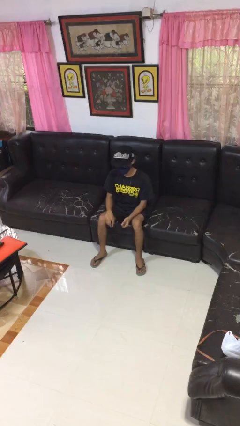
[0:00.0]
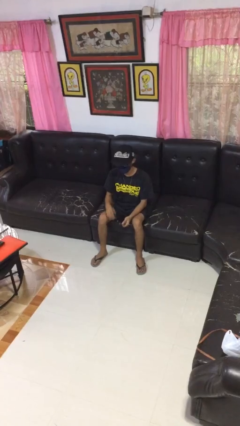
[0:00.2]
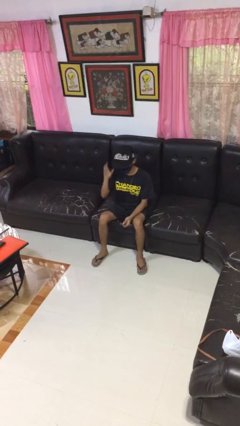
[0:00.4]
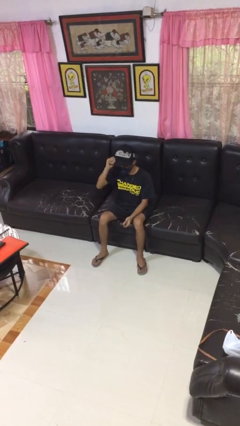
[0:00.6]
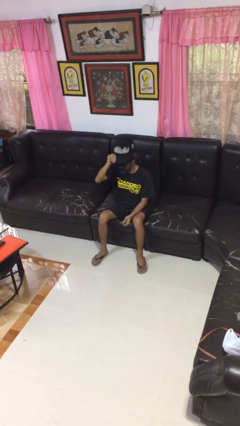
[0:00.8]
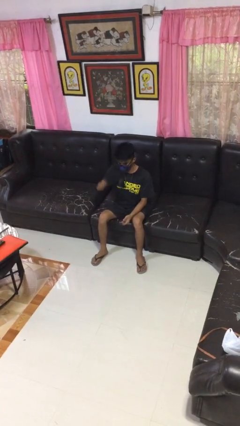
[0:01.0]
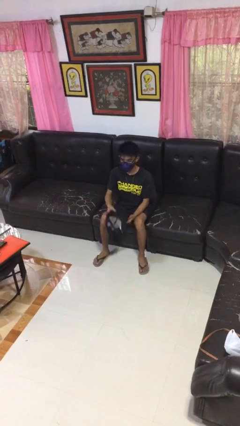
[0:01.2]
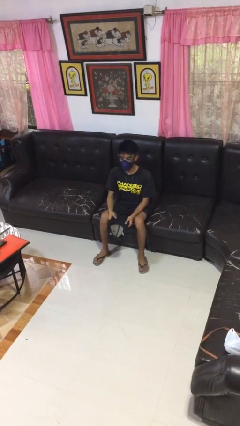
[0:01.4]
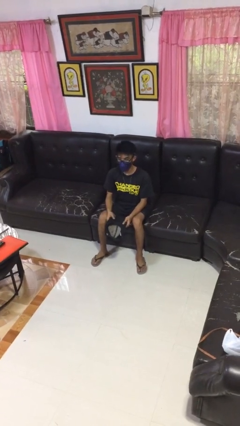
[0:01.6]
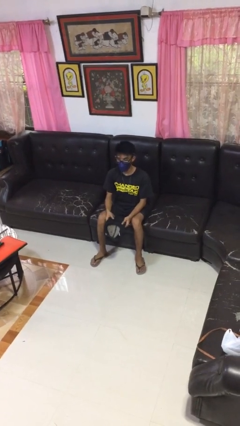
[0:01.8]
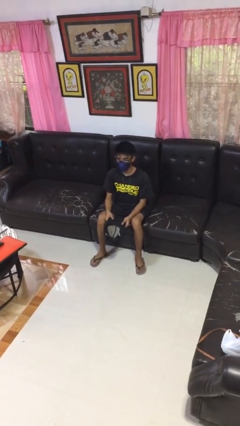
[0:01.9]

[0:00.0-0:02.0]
person takes off hat

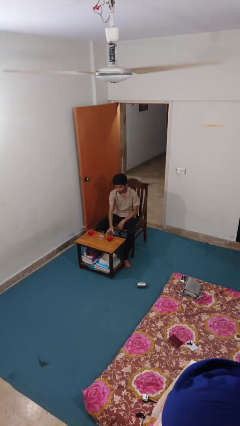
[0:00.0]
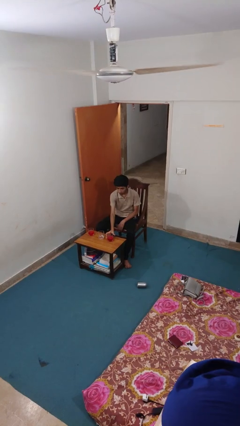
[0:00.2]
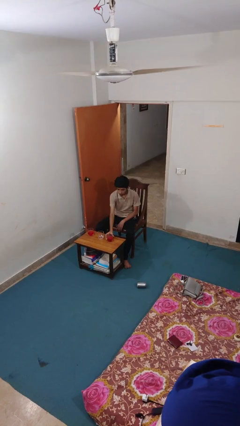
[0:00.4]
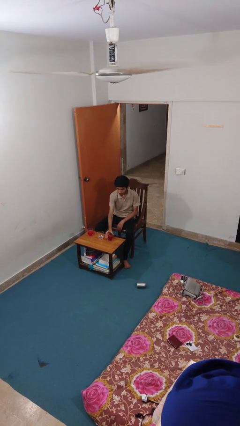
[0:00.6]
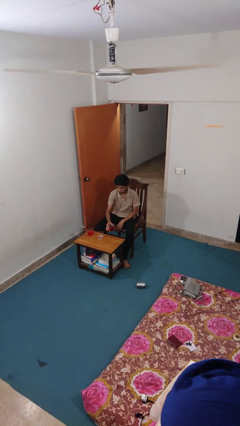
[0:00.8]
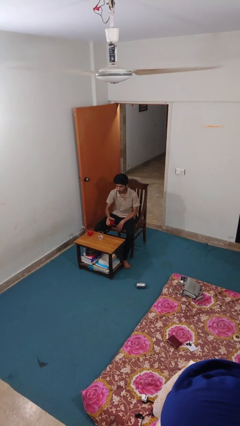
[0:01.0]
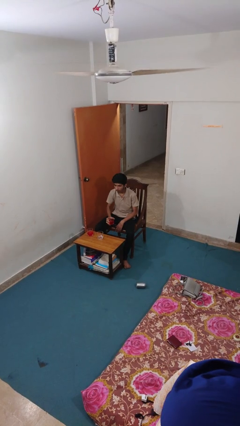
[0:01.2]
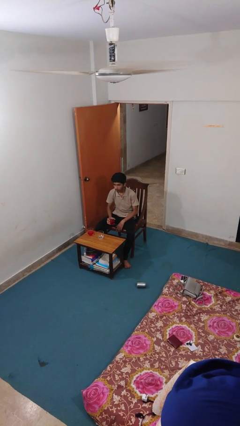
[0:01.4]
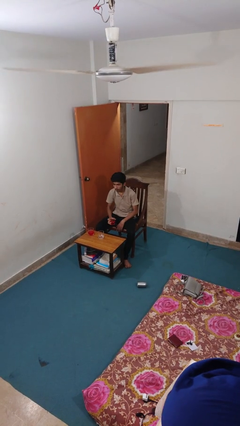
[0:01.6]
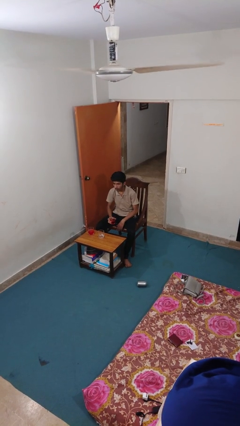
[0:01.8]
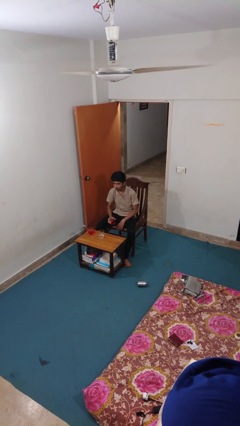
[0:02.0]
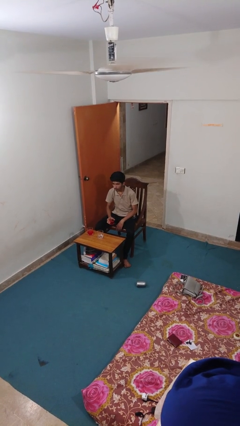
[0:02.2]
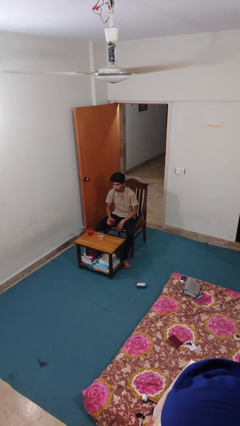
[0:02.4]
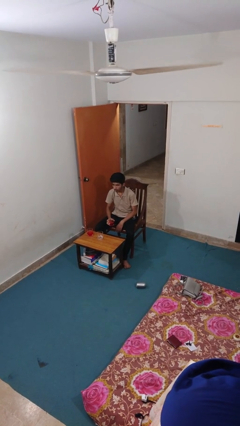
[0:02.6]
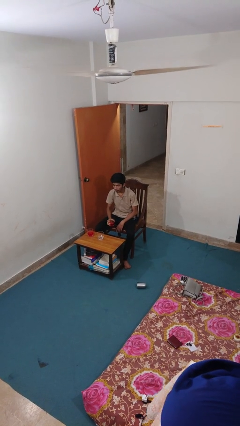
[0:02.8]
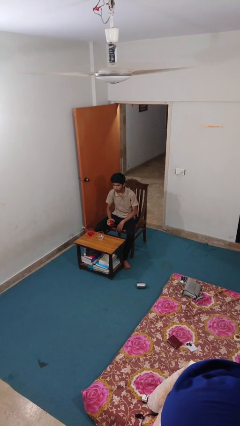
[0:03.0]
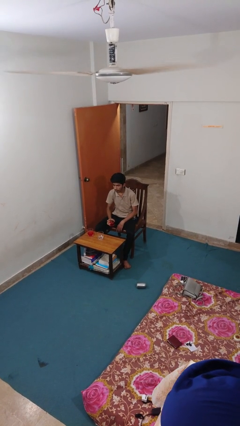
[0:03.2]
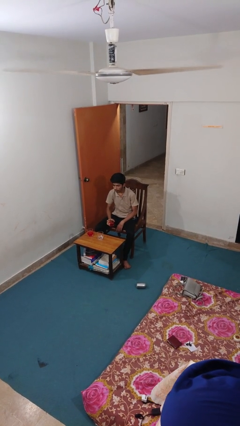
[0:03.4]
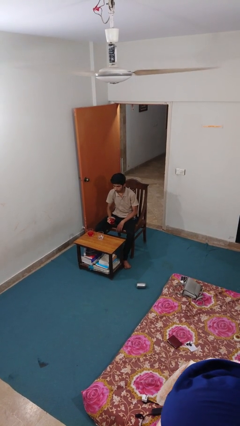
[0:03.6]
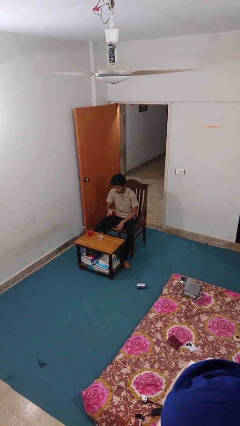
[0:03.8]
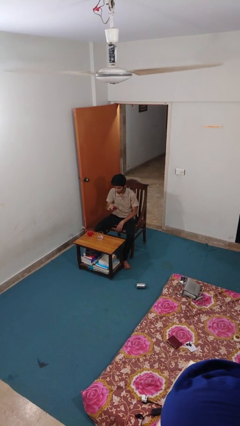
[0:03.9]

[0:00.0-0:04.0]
person picks up object from table

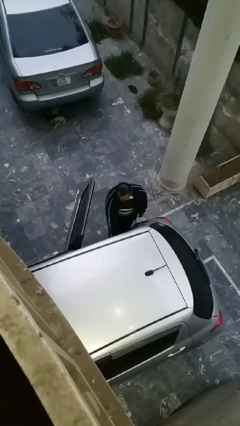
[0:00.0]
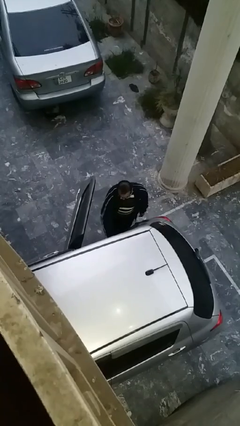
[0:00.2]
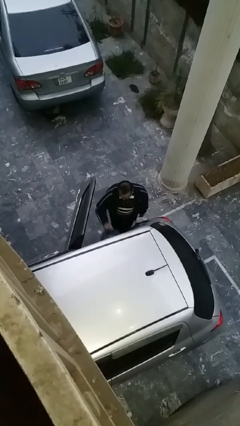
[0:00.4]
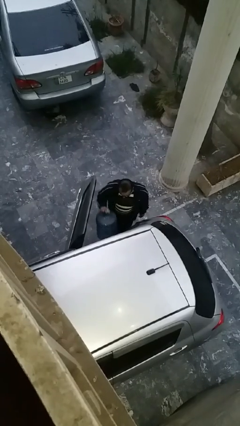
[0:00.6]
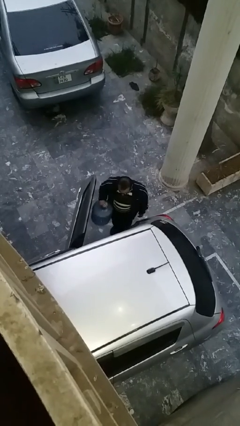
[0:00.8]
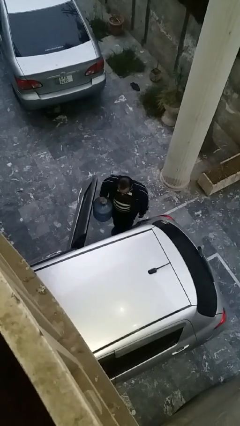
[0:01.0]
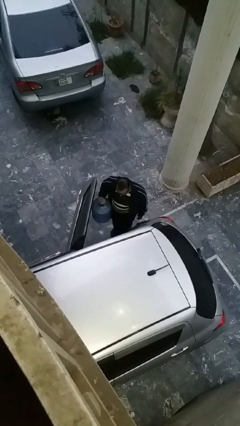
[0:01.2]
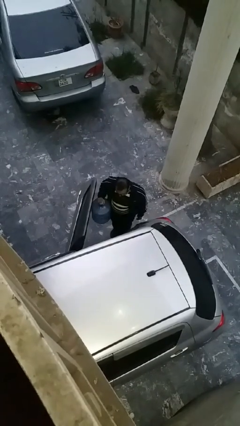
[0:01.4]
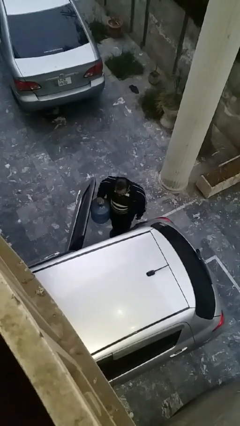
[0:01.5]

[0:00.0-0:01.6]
person unloads car

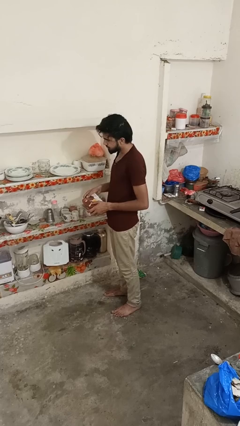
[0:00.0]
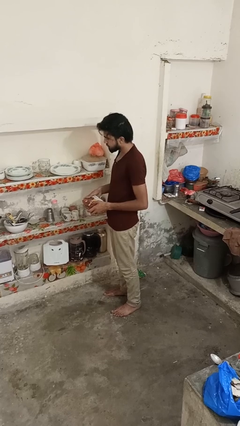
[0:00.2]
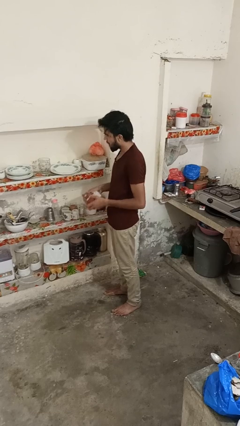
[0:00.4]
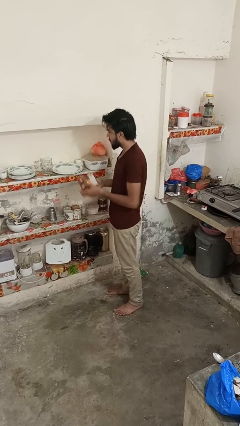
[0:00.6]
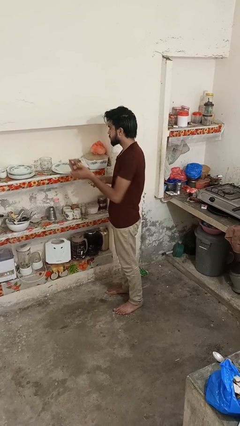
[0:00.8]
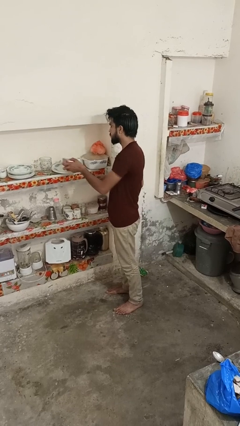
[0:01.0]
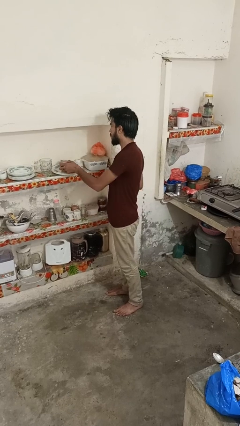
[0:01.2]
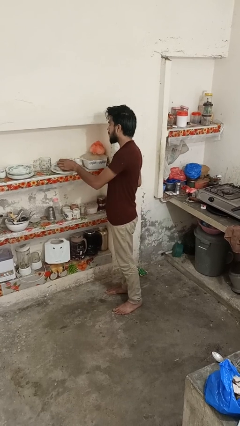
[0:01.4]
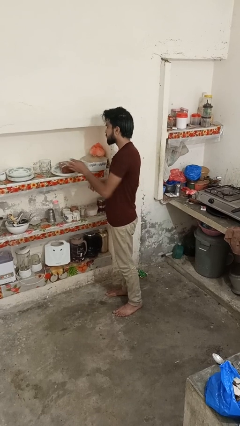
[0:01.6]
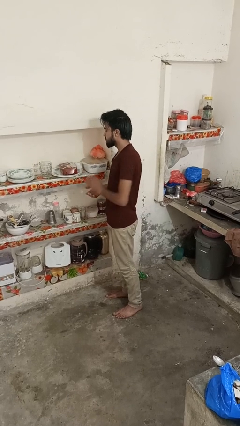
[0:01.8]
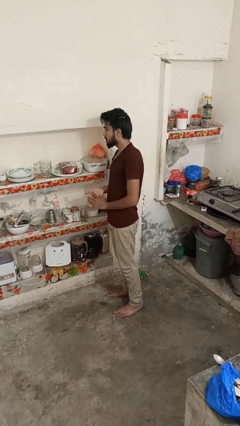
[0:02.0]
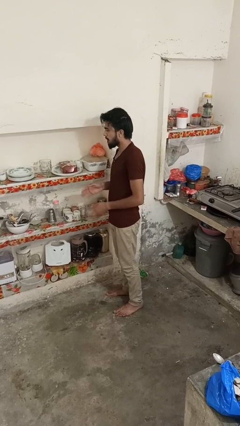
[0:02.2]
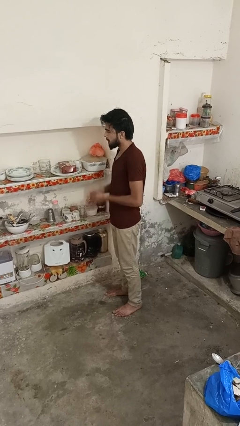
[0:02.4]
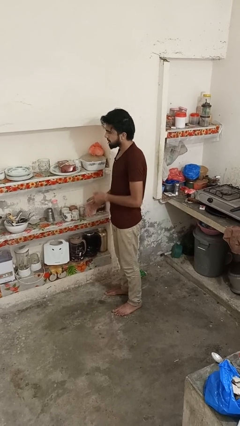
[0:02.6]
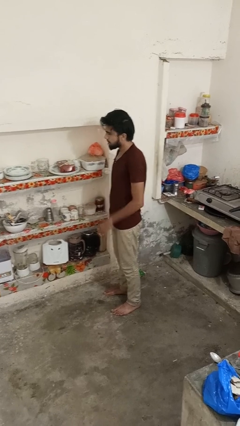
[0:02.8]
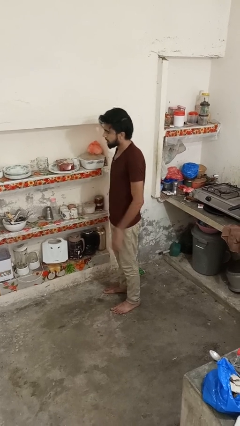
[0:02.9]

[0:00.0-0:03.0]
person puts down object into cabinet

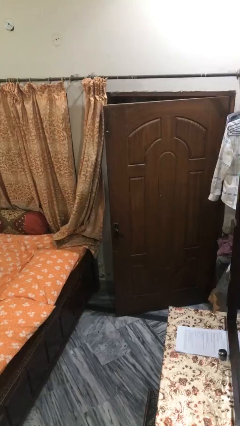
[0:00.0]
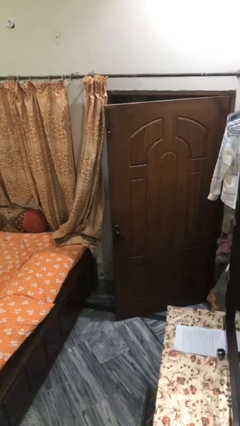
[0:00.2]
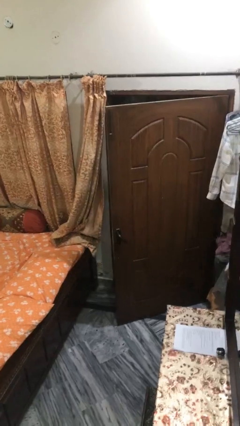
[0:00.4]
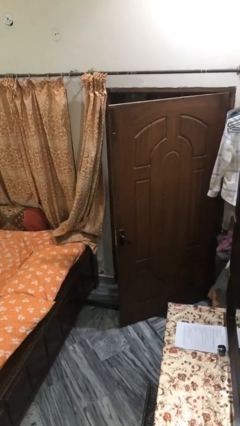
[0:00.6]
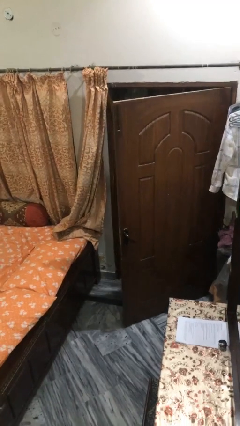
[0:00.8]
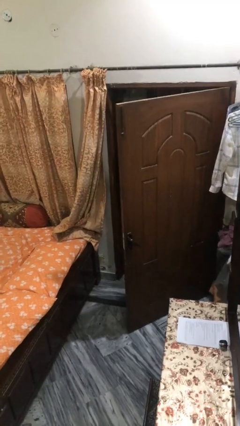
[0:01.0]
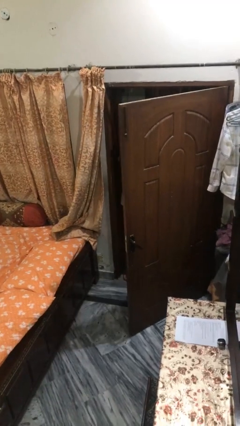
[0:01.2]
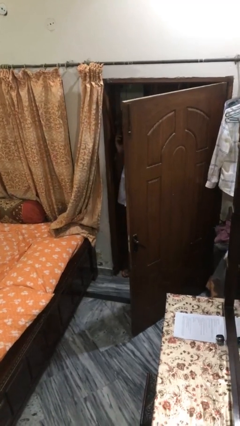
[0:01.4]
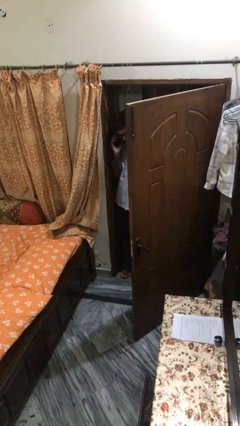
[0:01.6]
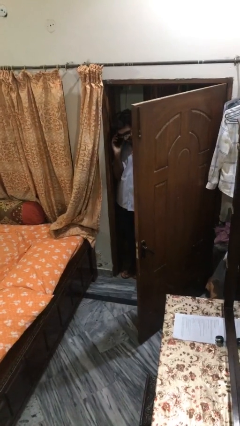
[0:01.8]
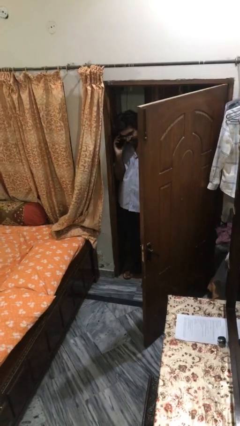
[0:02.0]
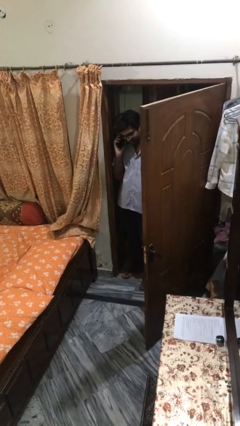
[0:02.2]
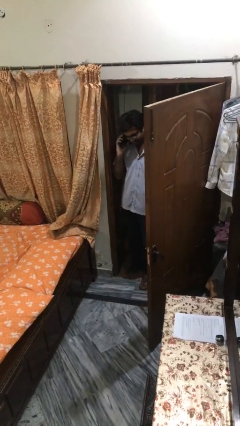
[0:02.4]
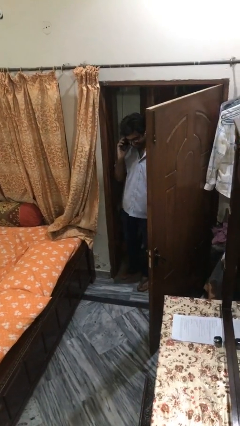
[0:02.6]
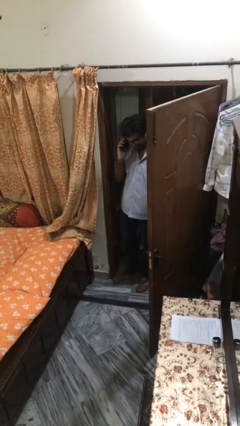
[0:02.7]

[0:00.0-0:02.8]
person opens facility door

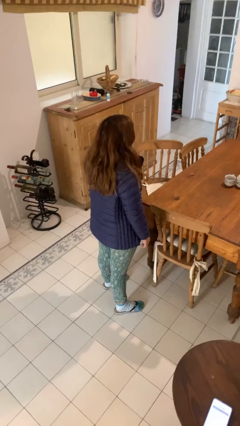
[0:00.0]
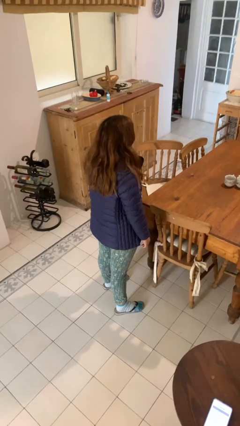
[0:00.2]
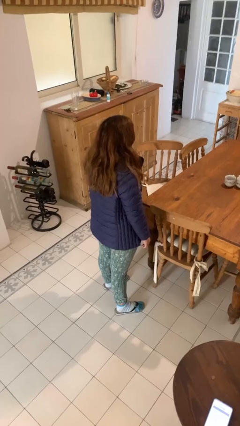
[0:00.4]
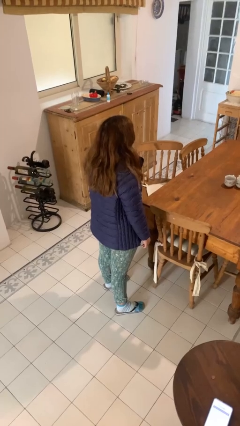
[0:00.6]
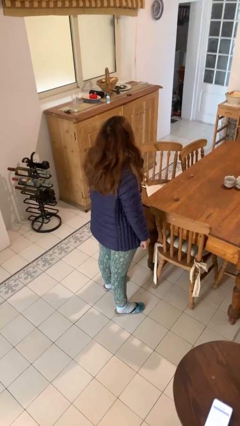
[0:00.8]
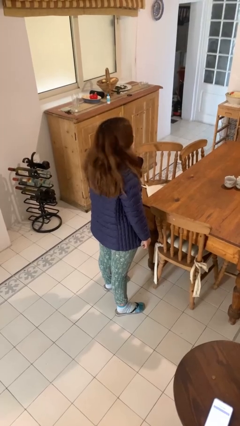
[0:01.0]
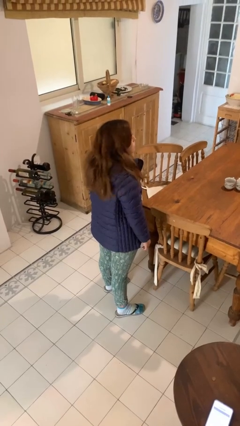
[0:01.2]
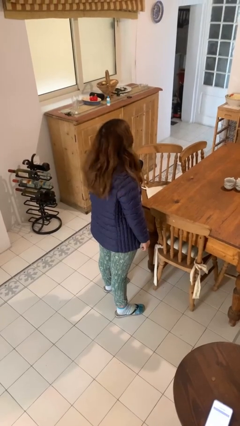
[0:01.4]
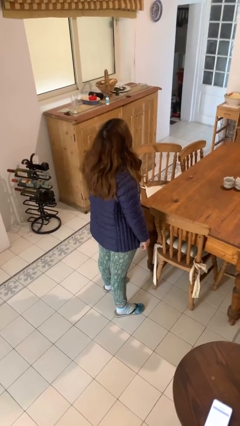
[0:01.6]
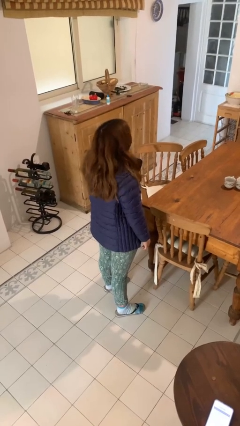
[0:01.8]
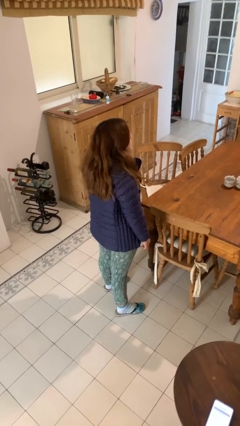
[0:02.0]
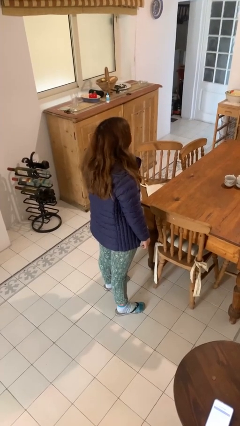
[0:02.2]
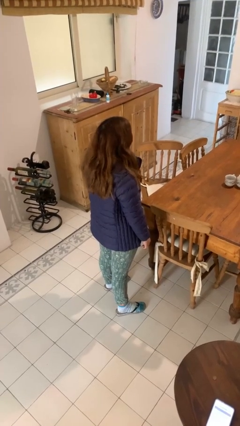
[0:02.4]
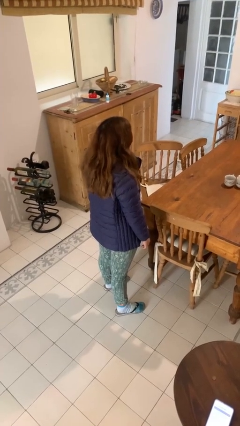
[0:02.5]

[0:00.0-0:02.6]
person shakes head

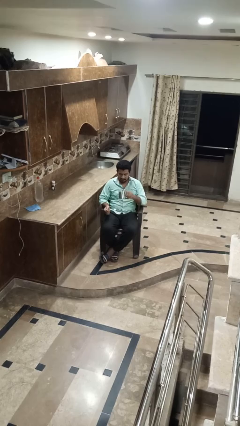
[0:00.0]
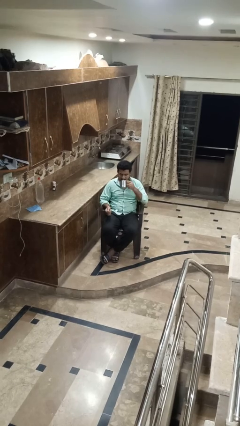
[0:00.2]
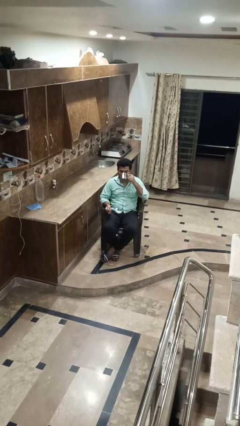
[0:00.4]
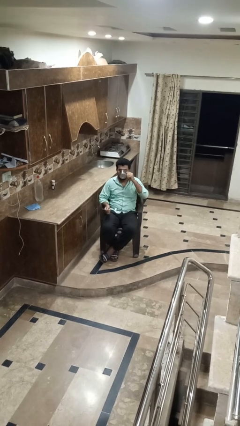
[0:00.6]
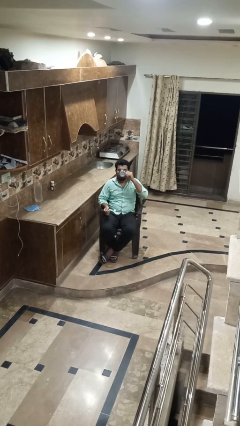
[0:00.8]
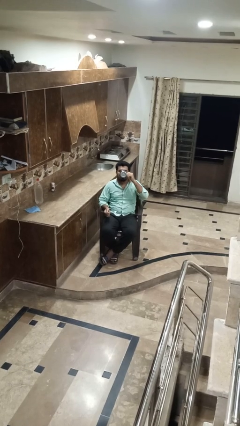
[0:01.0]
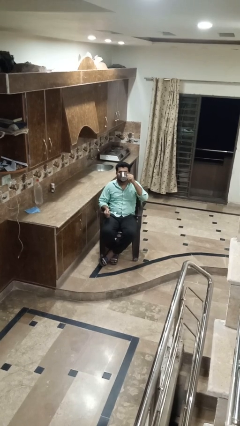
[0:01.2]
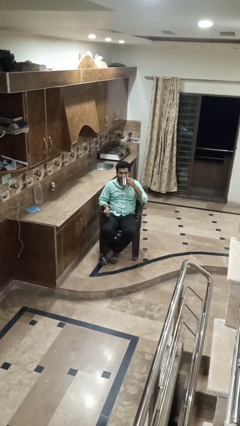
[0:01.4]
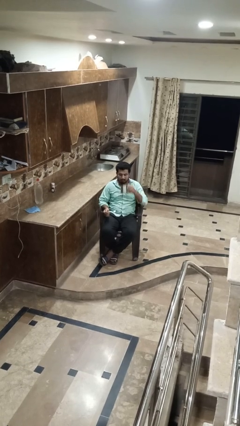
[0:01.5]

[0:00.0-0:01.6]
person drinks from mug
